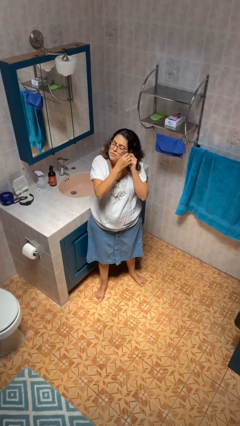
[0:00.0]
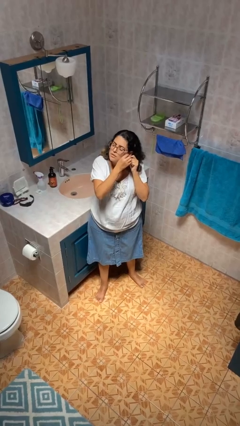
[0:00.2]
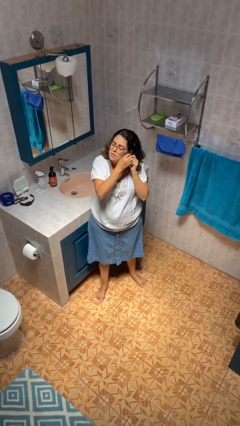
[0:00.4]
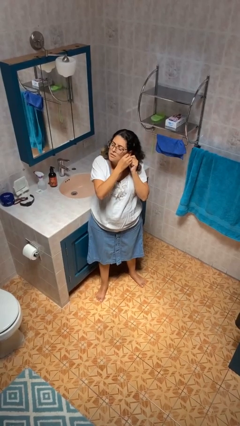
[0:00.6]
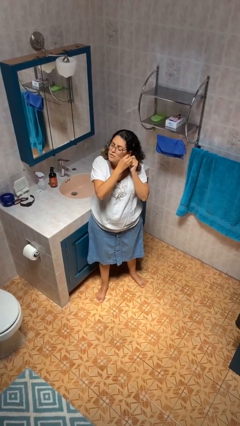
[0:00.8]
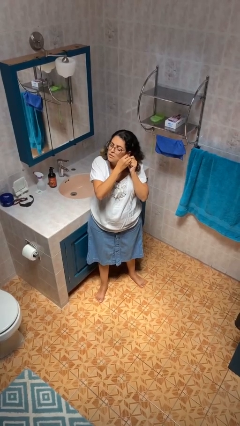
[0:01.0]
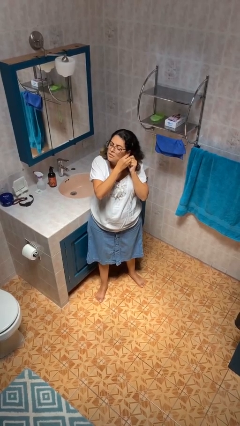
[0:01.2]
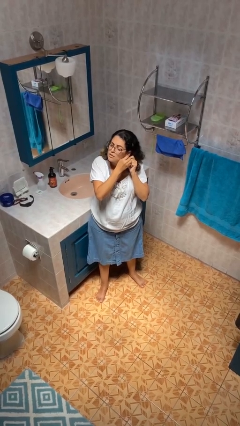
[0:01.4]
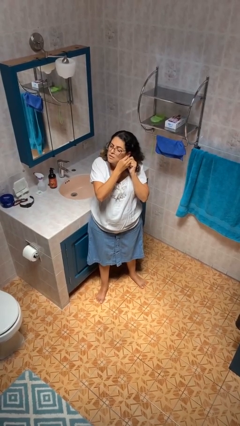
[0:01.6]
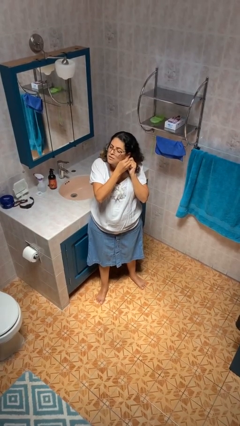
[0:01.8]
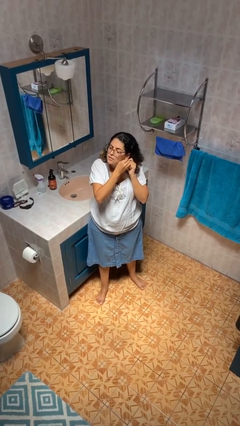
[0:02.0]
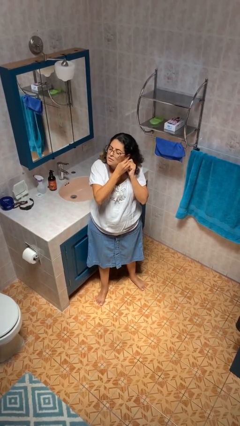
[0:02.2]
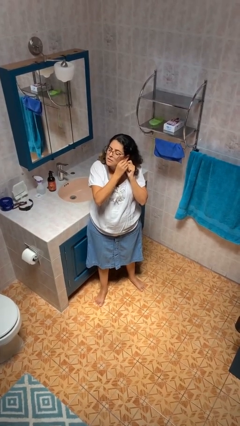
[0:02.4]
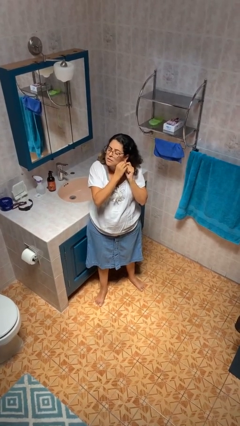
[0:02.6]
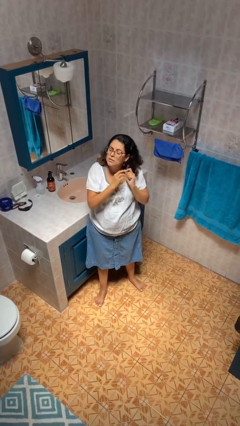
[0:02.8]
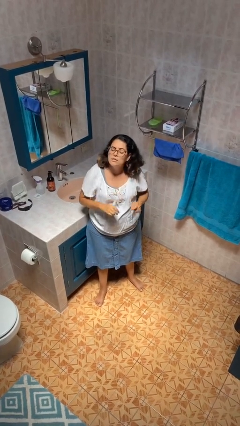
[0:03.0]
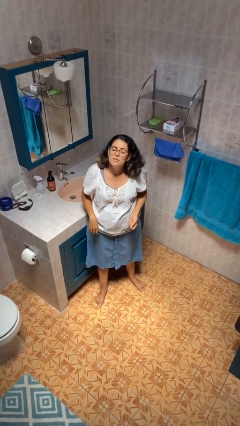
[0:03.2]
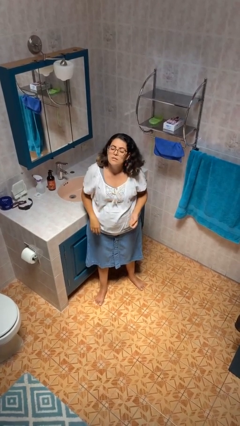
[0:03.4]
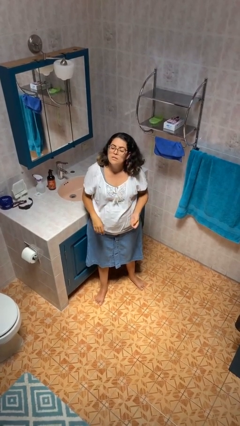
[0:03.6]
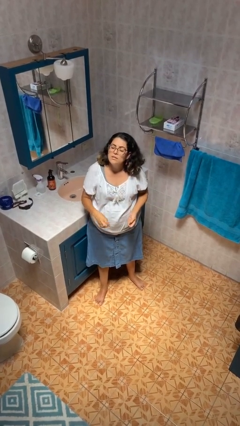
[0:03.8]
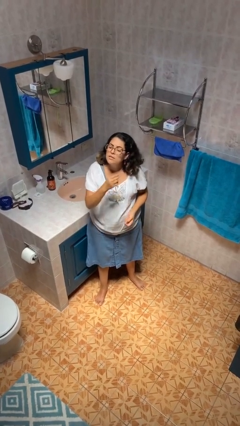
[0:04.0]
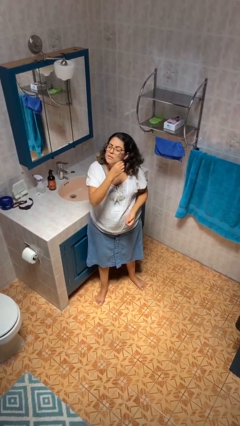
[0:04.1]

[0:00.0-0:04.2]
person puts on earrings

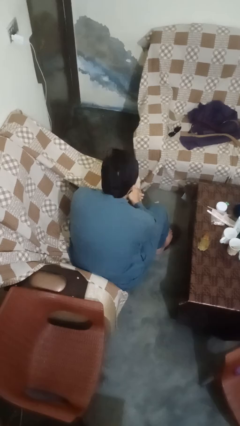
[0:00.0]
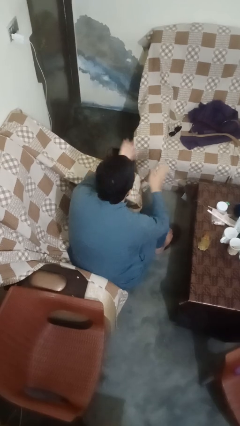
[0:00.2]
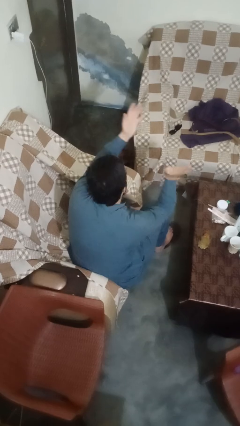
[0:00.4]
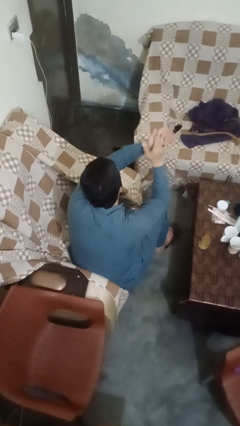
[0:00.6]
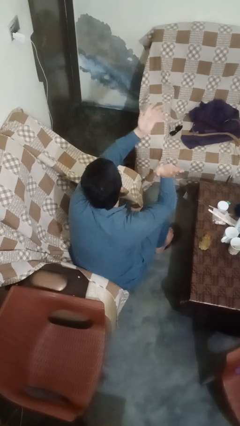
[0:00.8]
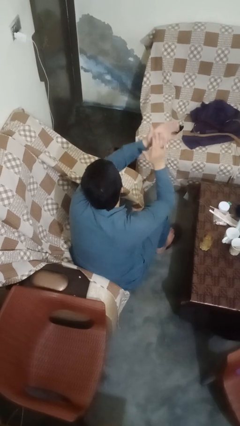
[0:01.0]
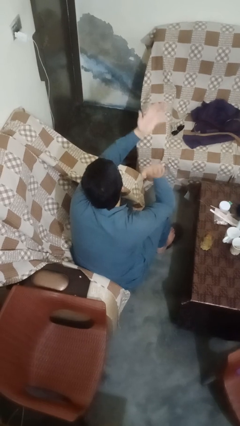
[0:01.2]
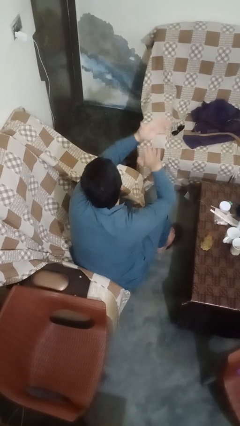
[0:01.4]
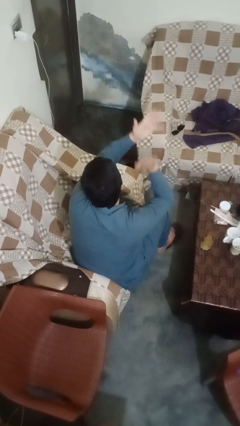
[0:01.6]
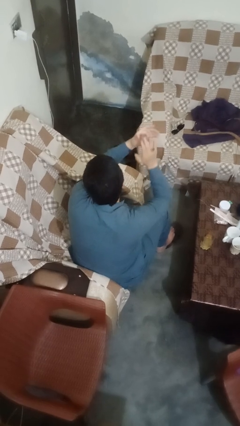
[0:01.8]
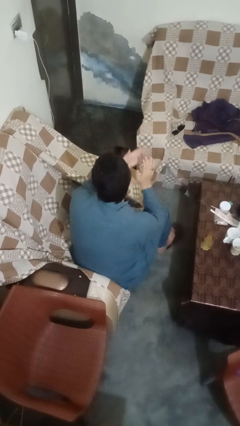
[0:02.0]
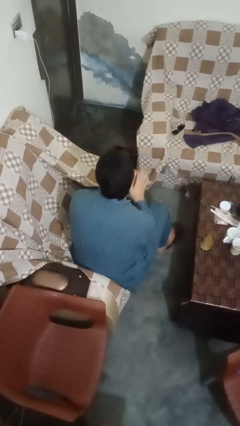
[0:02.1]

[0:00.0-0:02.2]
person claps hands

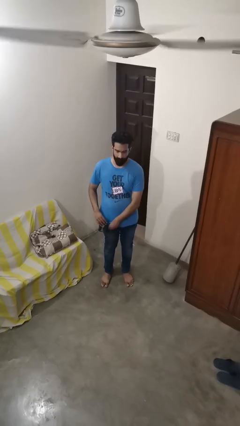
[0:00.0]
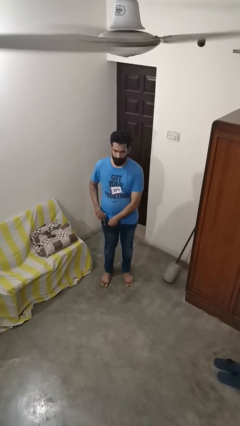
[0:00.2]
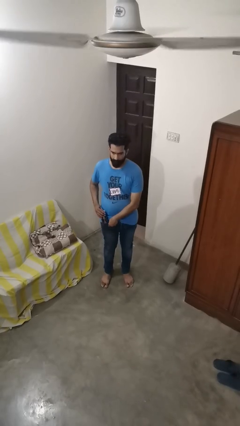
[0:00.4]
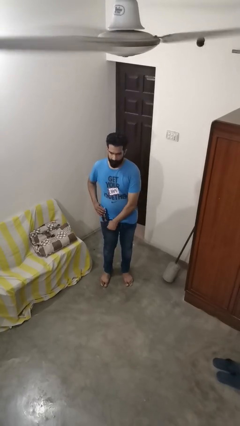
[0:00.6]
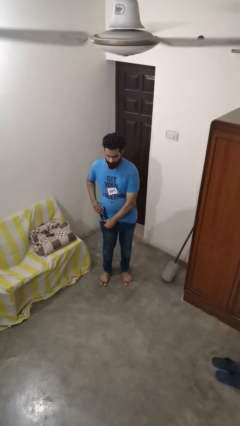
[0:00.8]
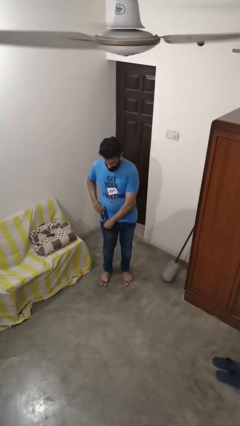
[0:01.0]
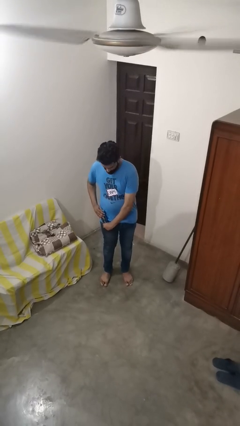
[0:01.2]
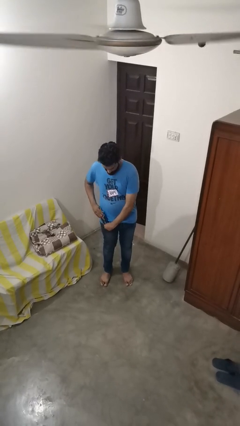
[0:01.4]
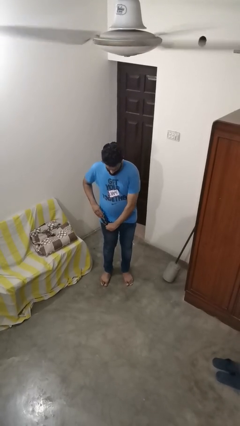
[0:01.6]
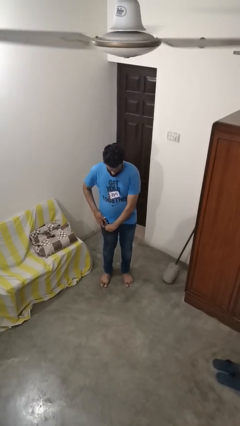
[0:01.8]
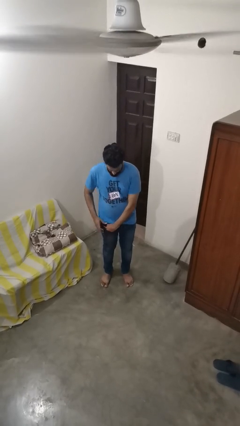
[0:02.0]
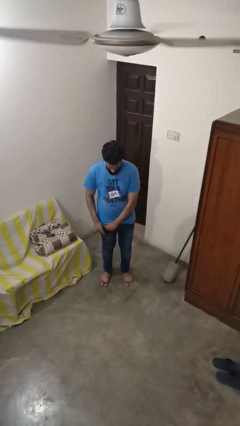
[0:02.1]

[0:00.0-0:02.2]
person puts phone into pocket

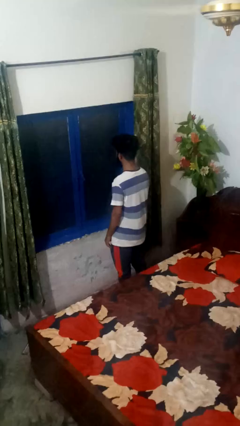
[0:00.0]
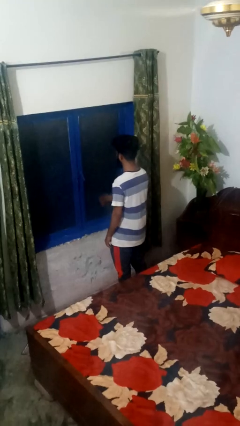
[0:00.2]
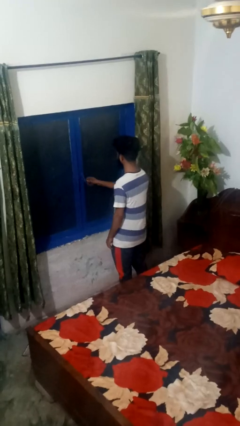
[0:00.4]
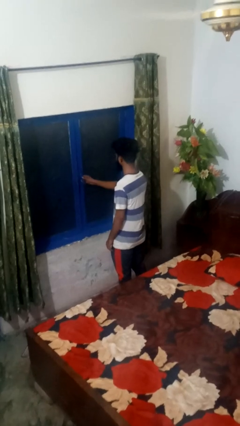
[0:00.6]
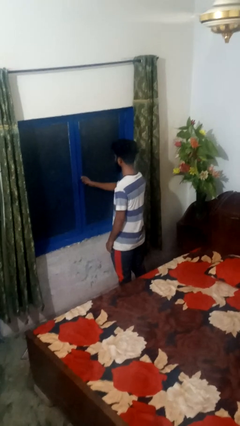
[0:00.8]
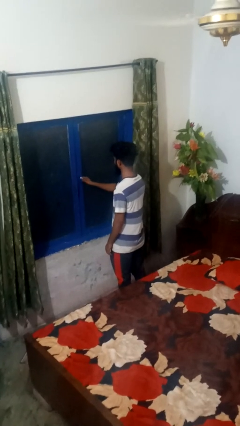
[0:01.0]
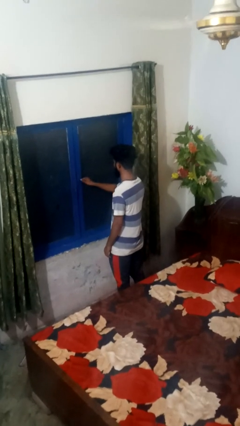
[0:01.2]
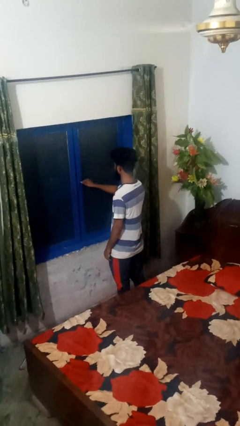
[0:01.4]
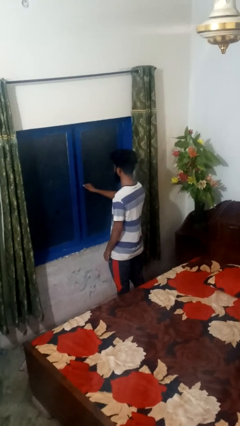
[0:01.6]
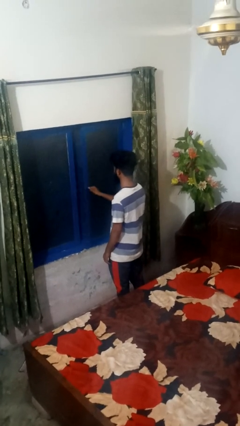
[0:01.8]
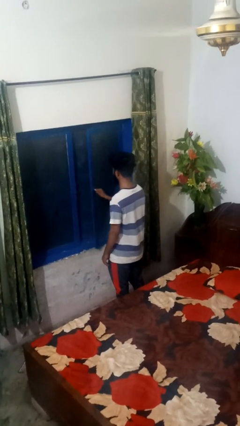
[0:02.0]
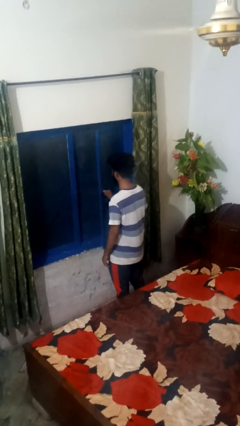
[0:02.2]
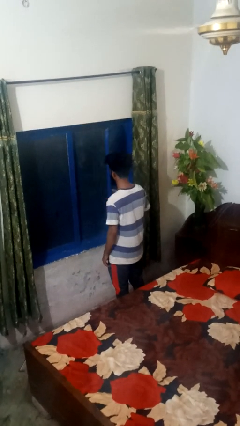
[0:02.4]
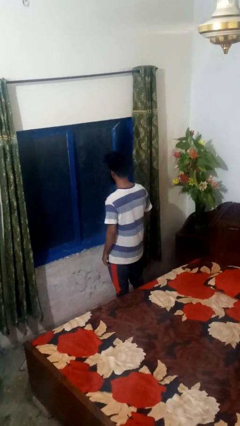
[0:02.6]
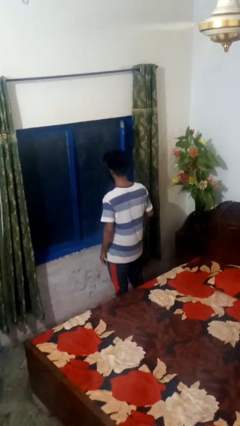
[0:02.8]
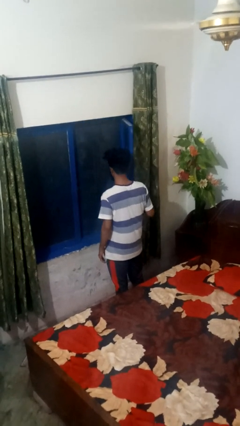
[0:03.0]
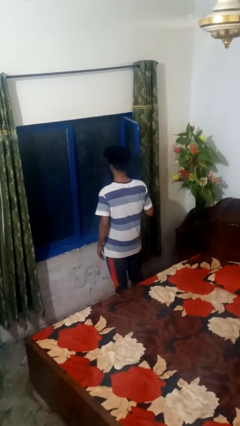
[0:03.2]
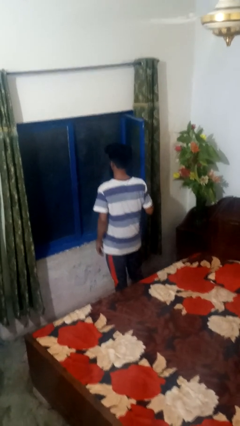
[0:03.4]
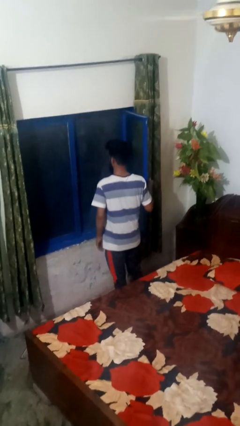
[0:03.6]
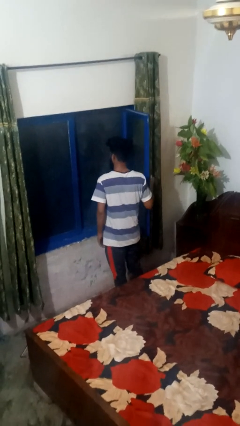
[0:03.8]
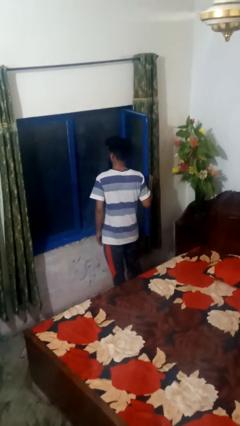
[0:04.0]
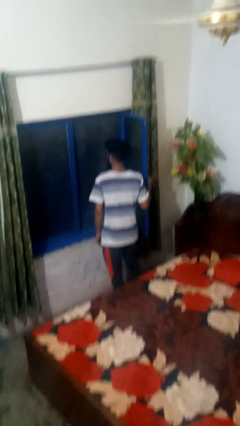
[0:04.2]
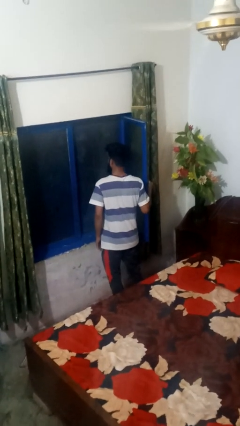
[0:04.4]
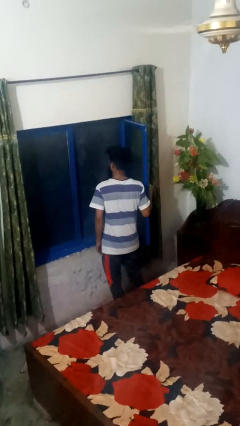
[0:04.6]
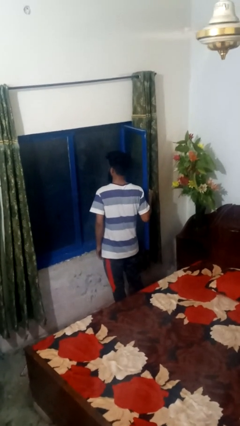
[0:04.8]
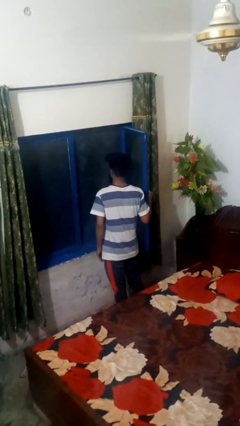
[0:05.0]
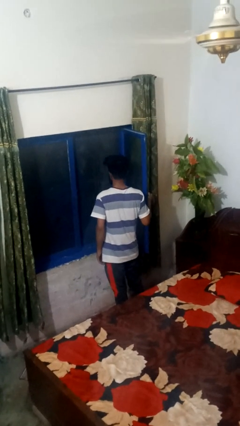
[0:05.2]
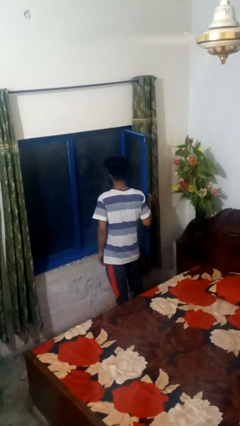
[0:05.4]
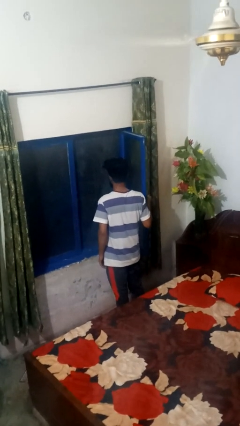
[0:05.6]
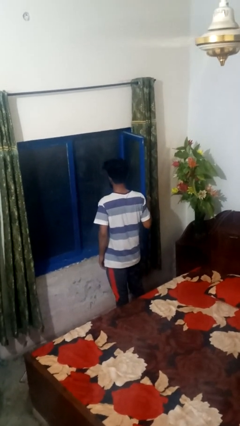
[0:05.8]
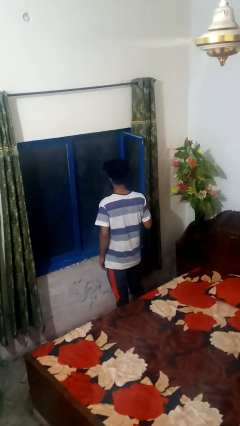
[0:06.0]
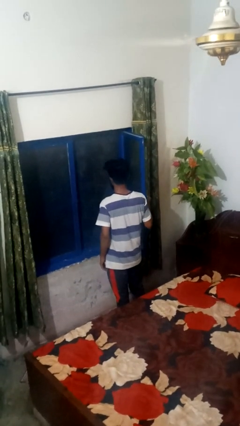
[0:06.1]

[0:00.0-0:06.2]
person opens home window

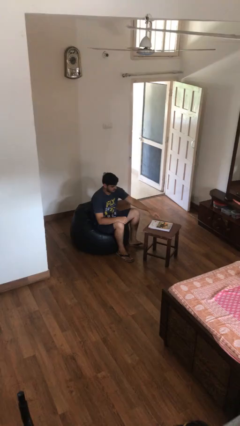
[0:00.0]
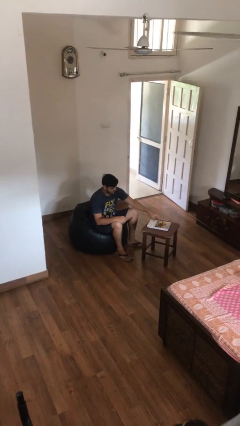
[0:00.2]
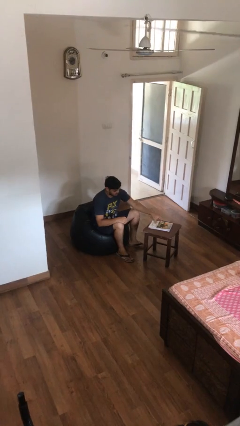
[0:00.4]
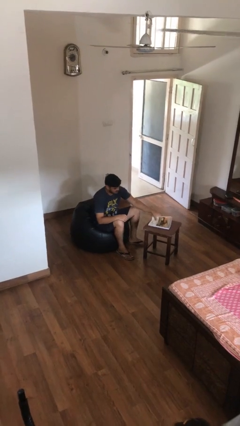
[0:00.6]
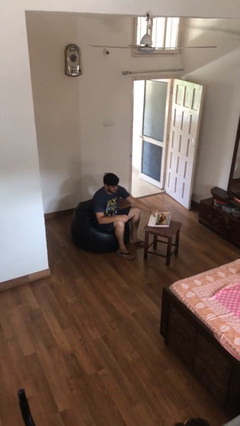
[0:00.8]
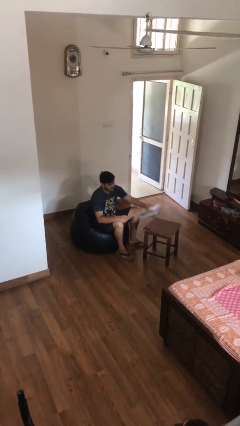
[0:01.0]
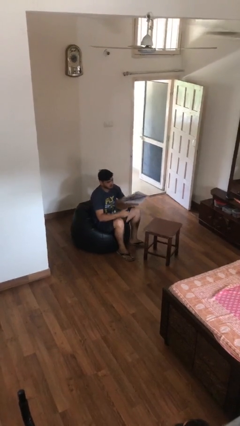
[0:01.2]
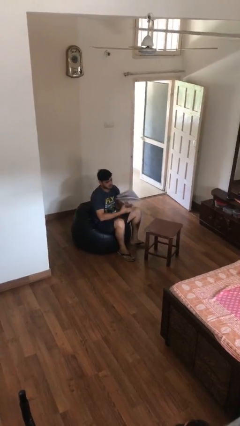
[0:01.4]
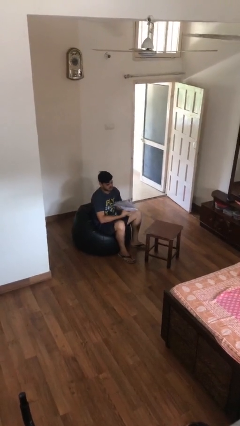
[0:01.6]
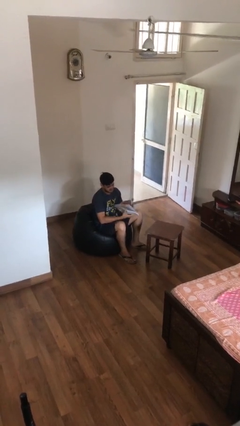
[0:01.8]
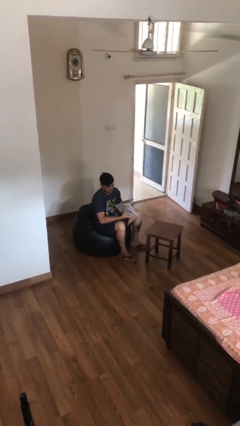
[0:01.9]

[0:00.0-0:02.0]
person picks up object from table

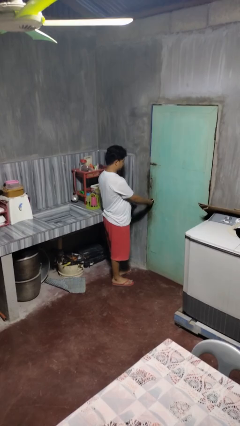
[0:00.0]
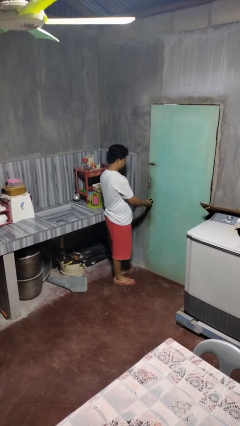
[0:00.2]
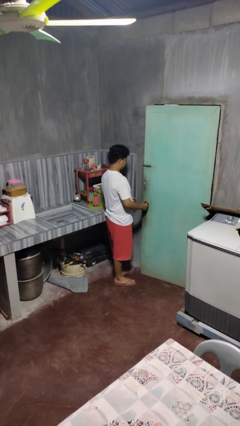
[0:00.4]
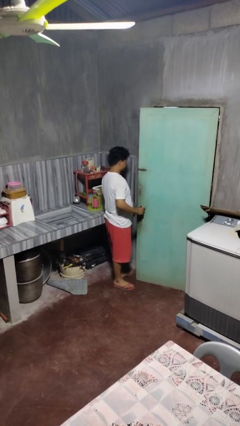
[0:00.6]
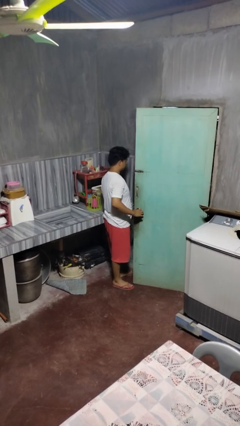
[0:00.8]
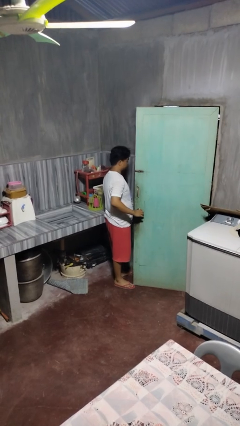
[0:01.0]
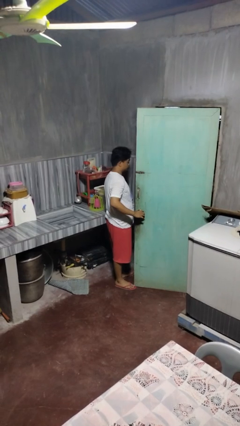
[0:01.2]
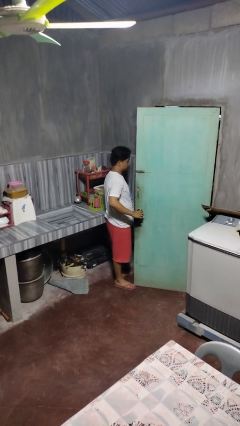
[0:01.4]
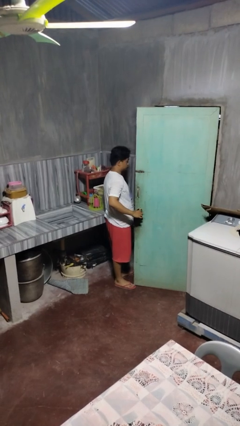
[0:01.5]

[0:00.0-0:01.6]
person opens facility door
